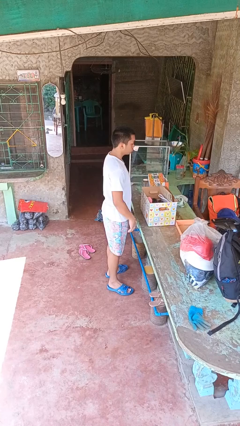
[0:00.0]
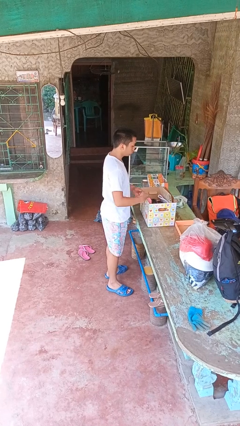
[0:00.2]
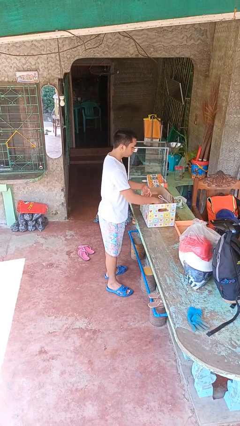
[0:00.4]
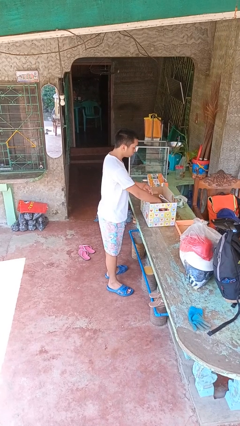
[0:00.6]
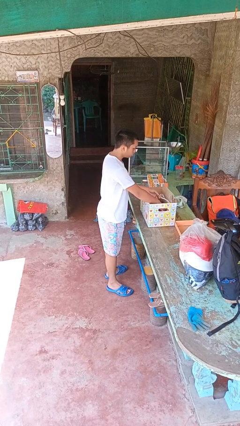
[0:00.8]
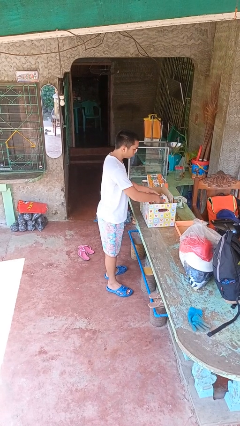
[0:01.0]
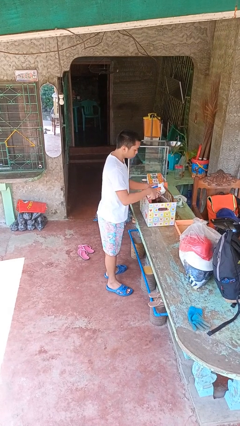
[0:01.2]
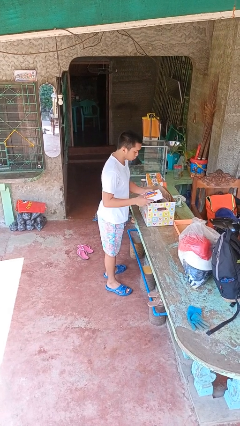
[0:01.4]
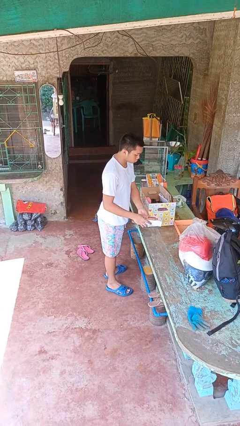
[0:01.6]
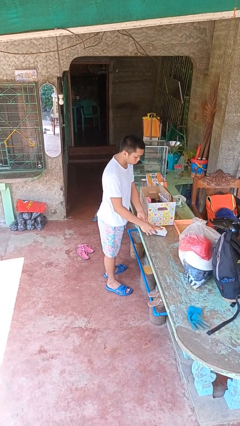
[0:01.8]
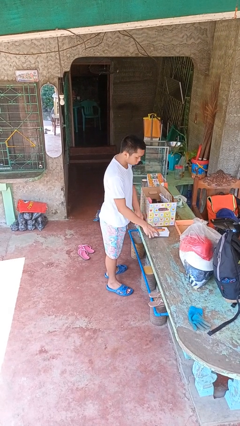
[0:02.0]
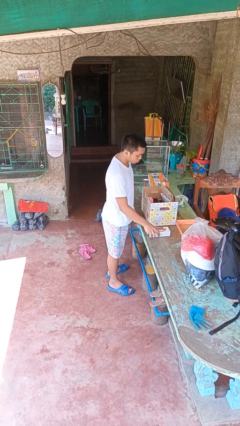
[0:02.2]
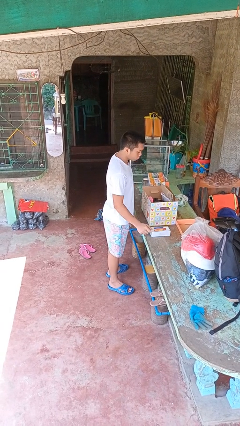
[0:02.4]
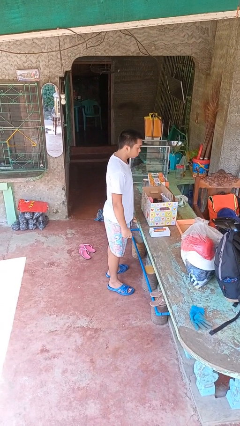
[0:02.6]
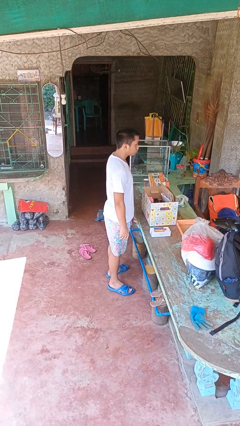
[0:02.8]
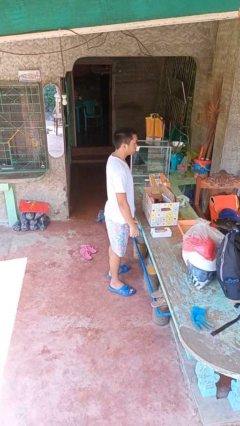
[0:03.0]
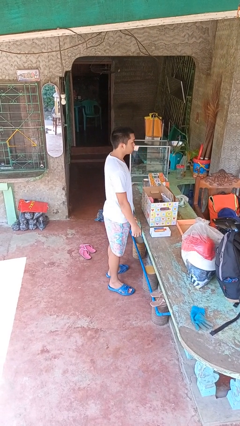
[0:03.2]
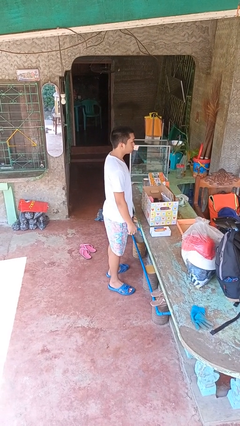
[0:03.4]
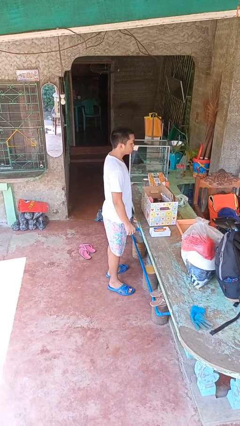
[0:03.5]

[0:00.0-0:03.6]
person takes object from box

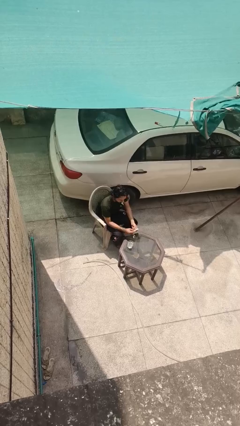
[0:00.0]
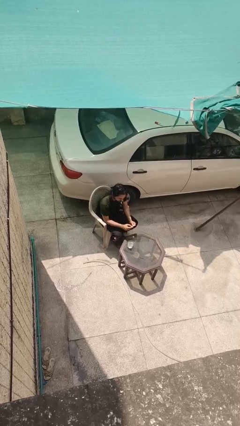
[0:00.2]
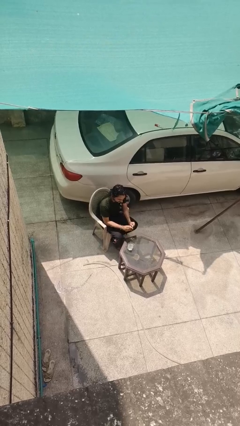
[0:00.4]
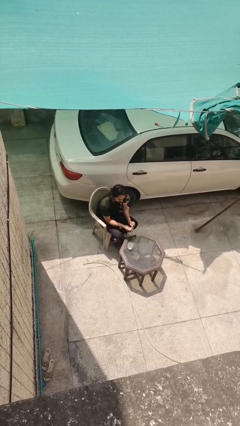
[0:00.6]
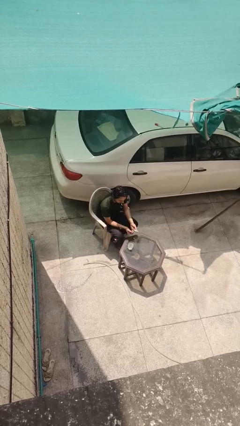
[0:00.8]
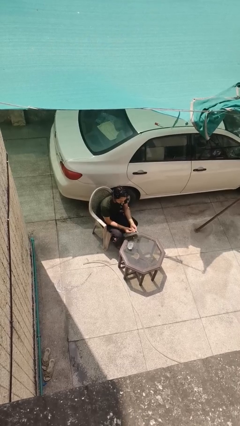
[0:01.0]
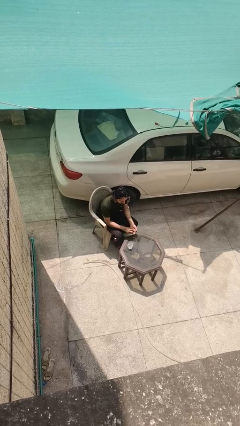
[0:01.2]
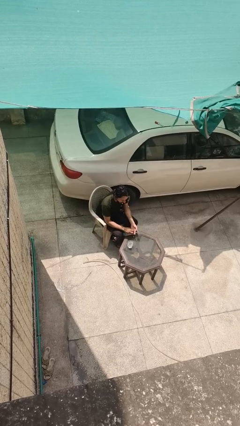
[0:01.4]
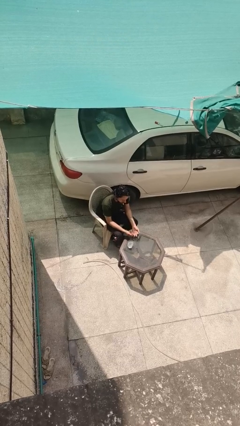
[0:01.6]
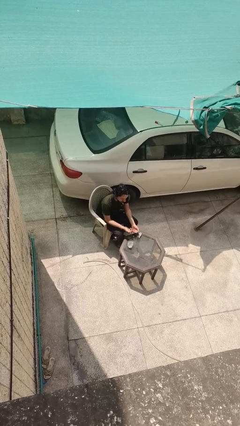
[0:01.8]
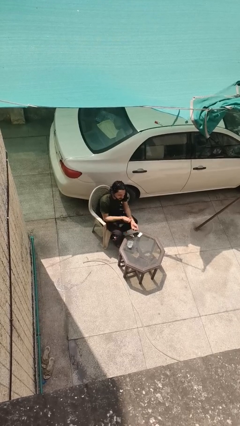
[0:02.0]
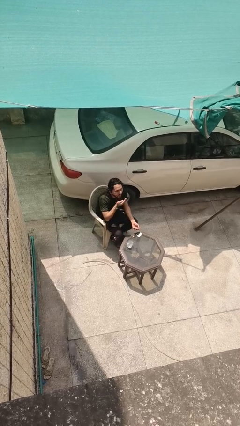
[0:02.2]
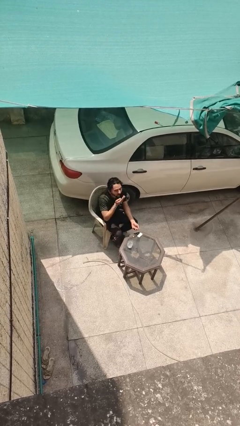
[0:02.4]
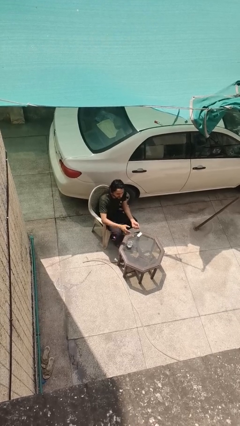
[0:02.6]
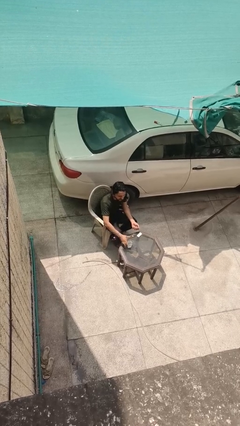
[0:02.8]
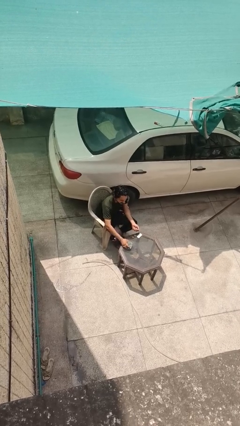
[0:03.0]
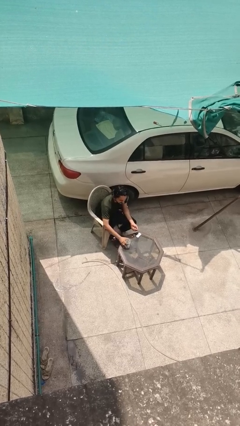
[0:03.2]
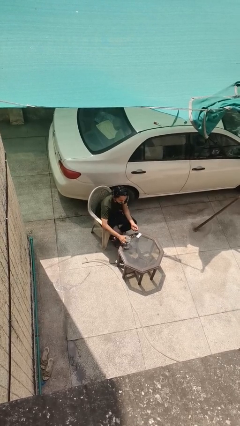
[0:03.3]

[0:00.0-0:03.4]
person takes medicine pills

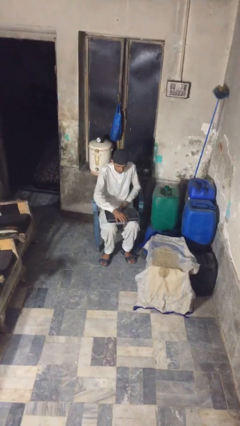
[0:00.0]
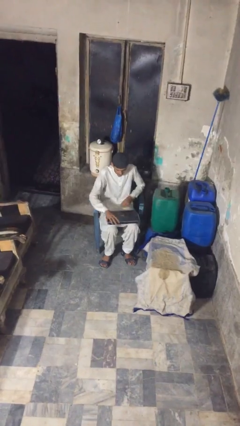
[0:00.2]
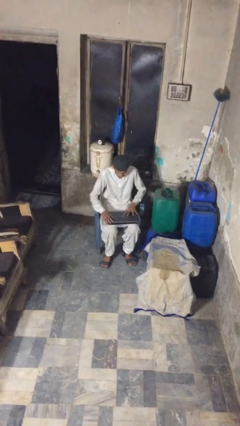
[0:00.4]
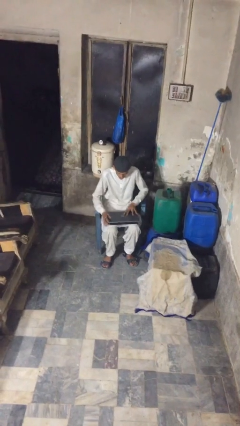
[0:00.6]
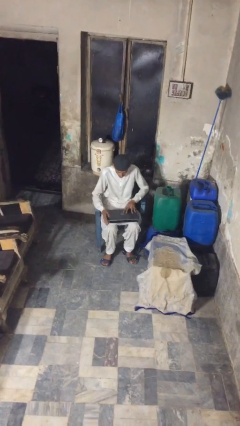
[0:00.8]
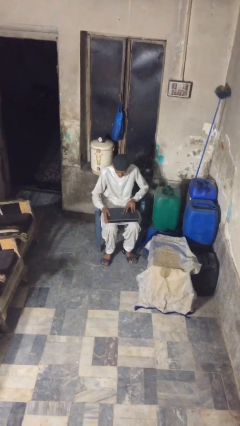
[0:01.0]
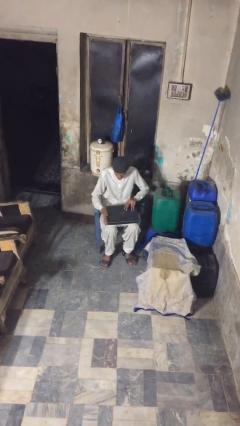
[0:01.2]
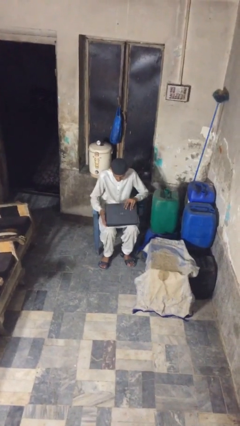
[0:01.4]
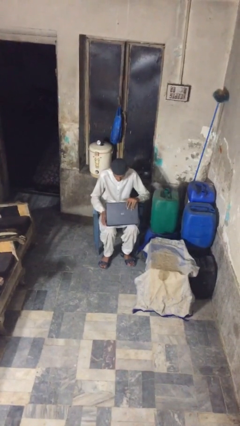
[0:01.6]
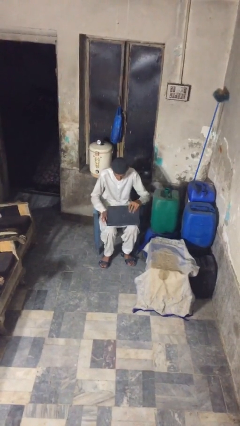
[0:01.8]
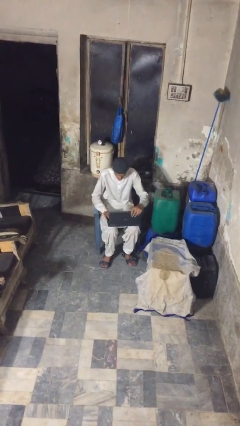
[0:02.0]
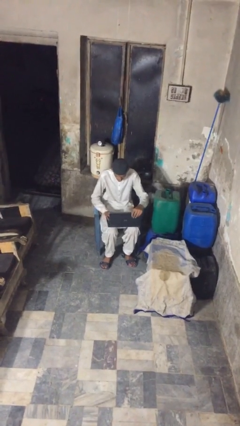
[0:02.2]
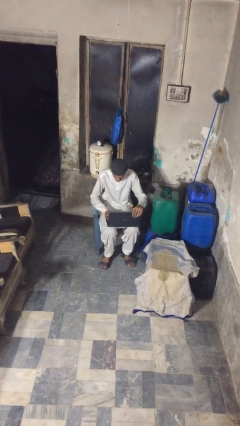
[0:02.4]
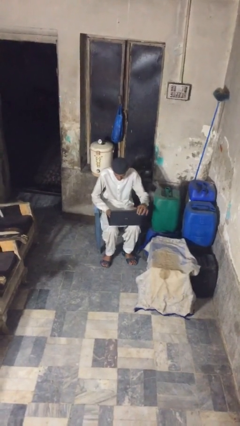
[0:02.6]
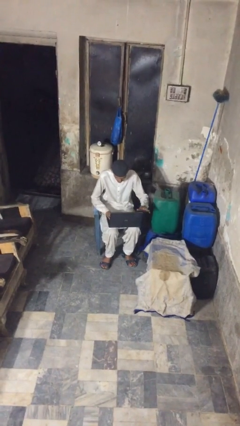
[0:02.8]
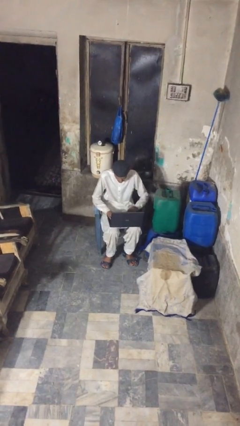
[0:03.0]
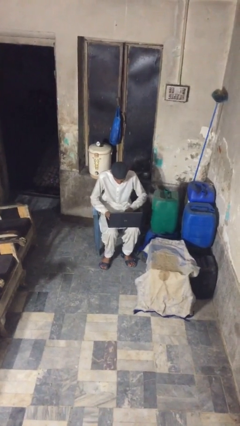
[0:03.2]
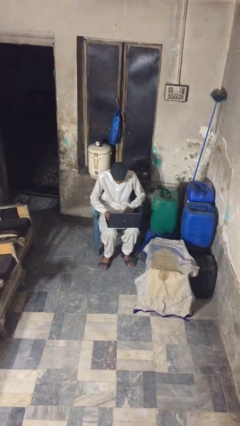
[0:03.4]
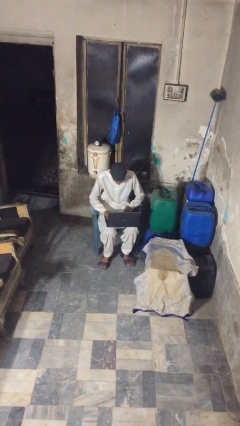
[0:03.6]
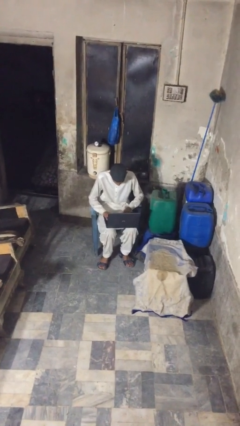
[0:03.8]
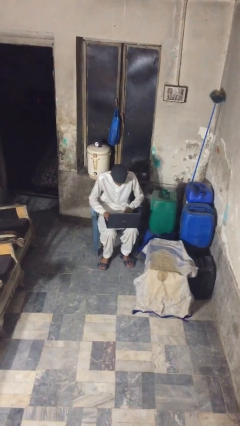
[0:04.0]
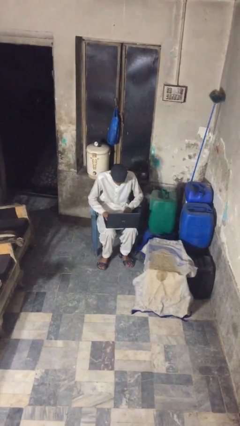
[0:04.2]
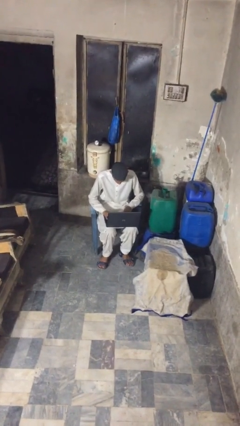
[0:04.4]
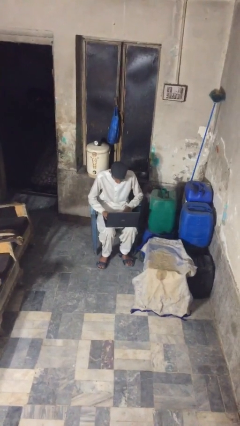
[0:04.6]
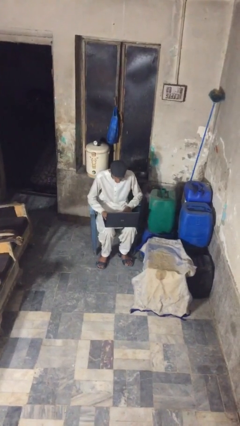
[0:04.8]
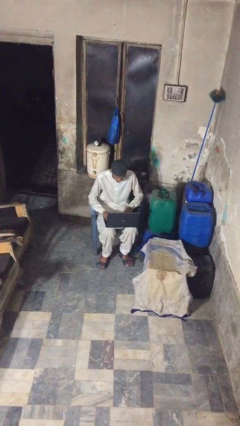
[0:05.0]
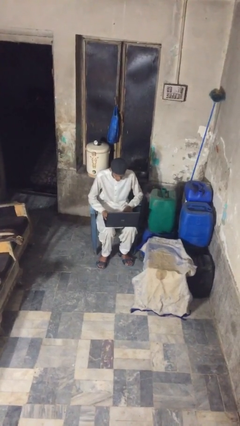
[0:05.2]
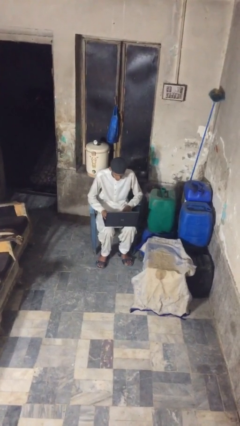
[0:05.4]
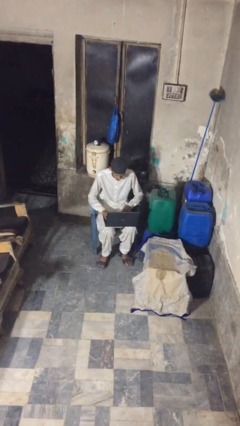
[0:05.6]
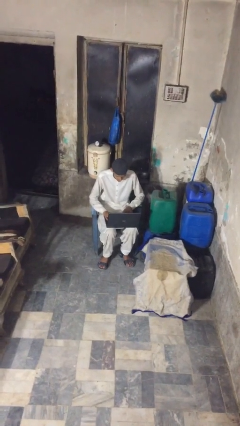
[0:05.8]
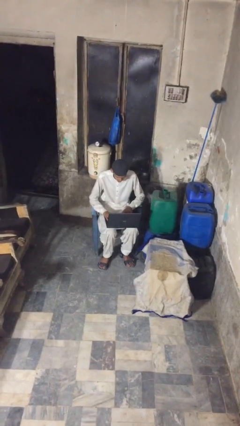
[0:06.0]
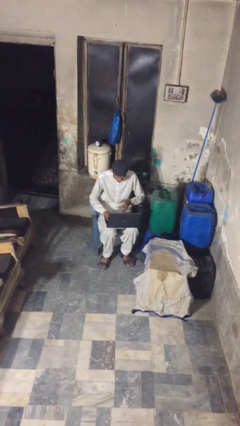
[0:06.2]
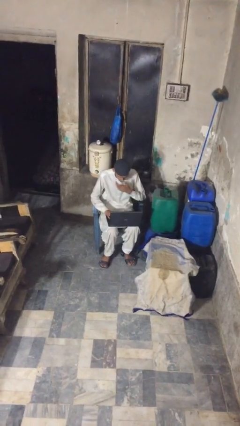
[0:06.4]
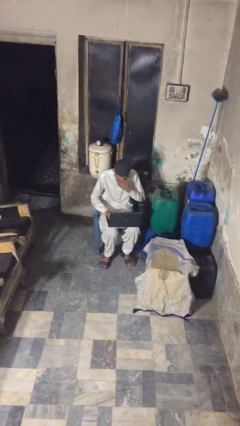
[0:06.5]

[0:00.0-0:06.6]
person interacts with laptop

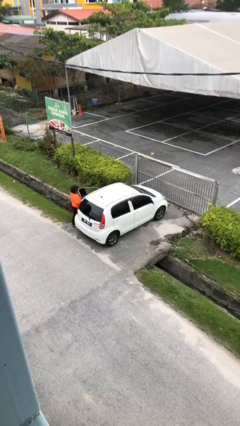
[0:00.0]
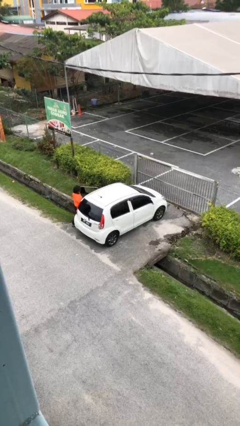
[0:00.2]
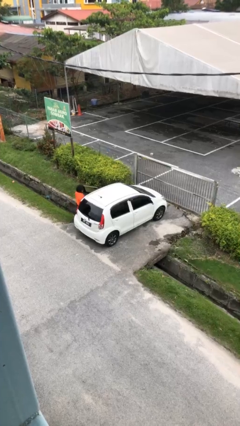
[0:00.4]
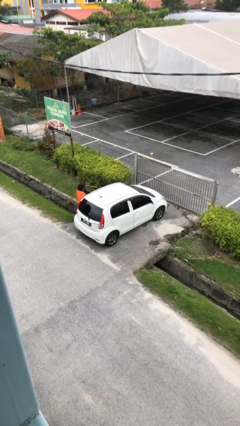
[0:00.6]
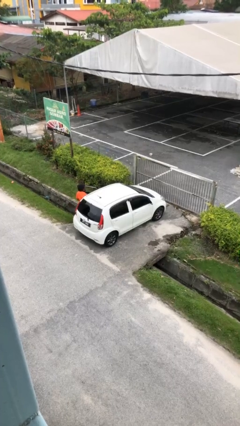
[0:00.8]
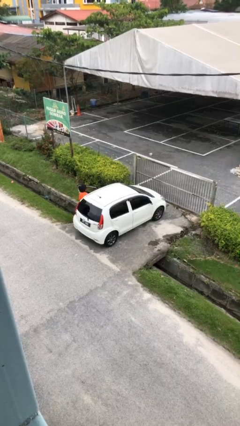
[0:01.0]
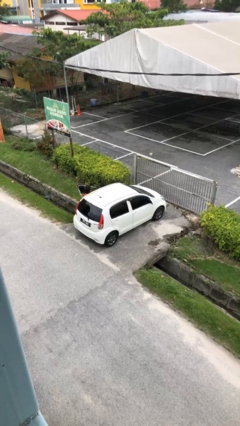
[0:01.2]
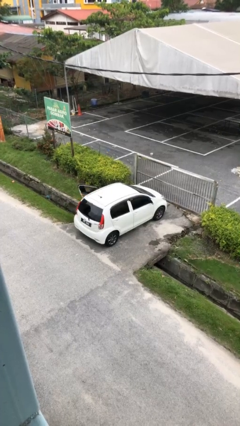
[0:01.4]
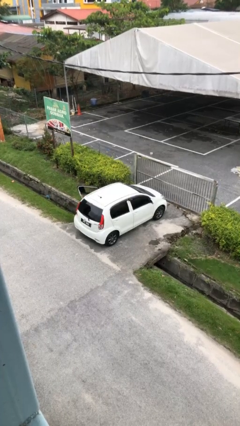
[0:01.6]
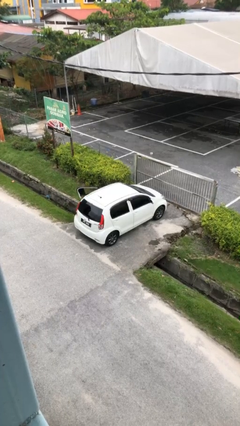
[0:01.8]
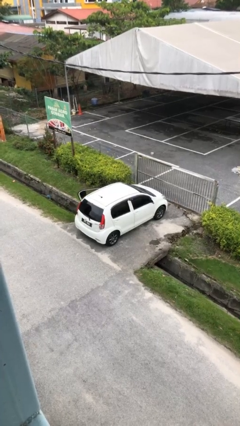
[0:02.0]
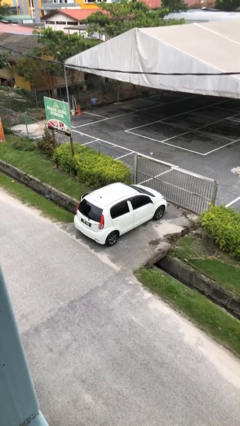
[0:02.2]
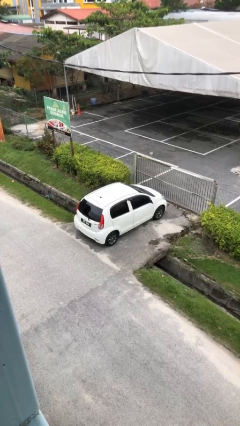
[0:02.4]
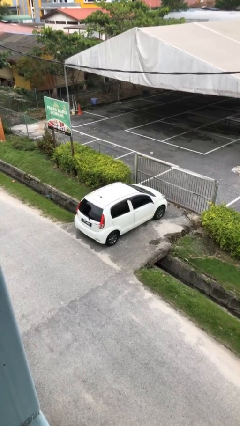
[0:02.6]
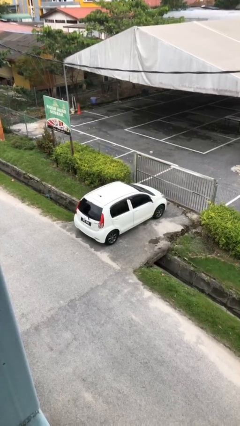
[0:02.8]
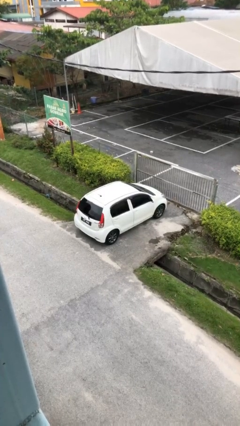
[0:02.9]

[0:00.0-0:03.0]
car picks up person

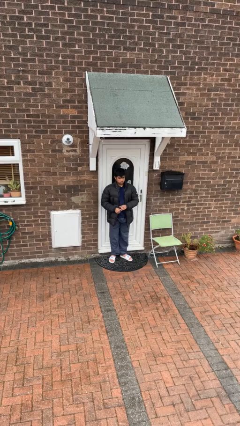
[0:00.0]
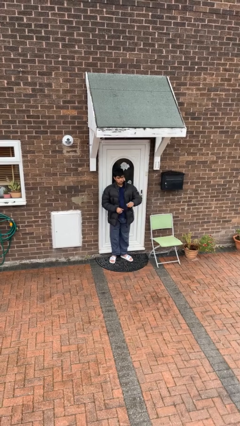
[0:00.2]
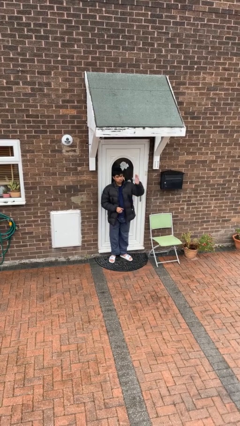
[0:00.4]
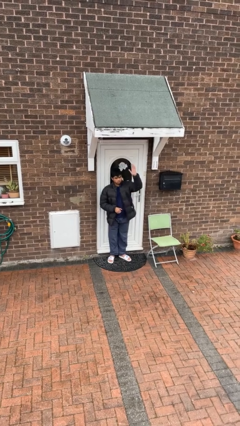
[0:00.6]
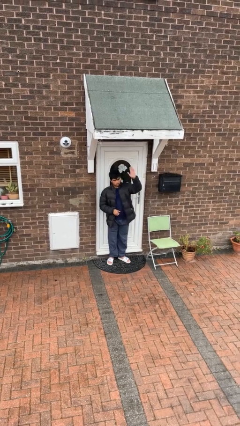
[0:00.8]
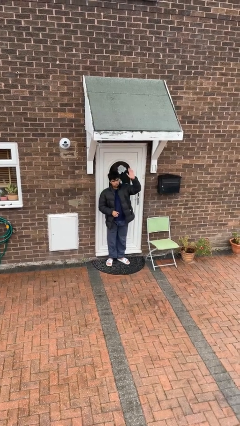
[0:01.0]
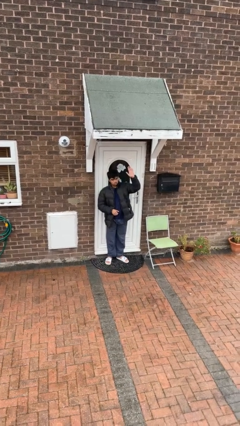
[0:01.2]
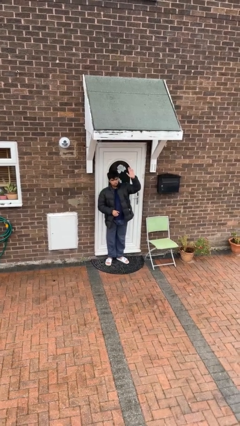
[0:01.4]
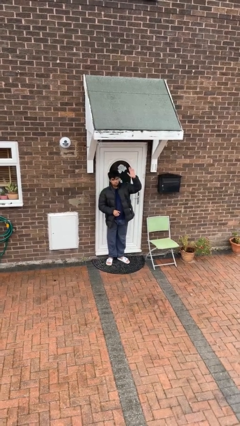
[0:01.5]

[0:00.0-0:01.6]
person gestures raise hand
